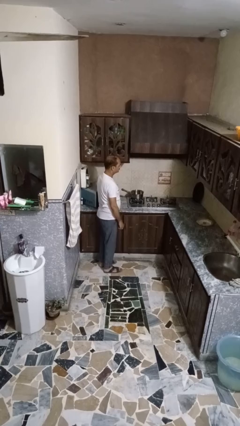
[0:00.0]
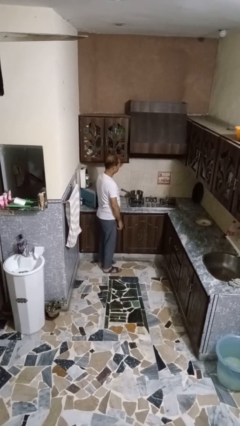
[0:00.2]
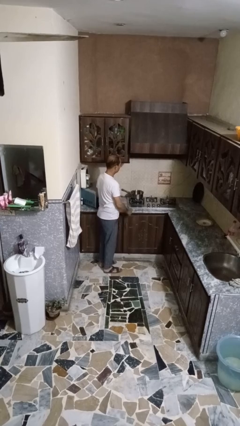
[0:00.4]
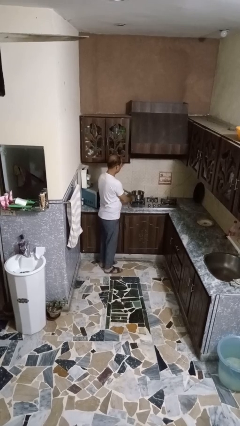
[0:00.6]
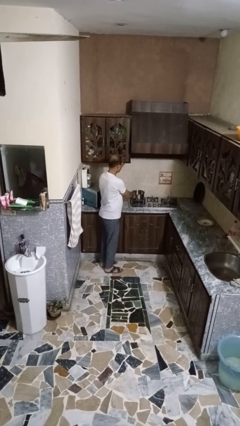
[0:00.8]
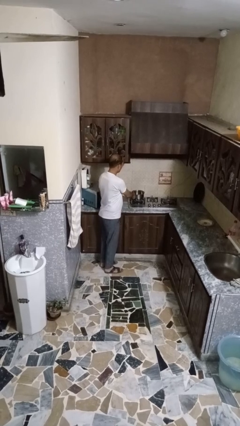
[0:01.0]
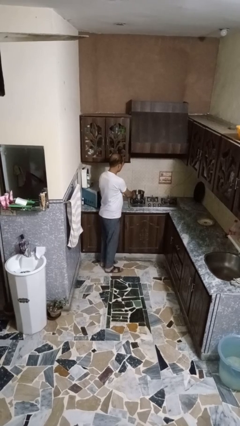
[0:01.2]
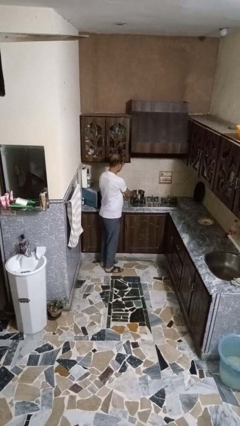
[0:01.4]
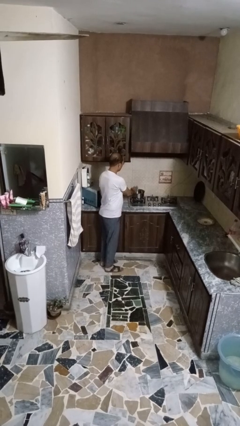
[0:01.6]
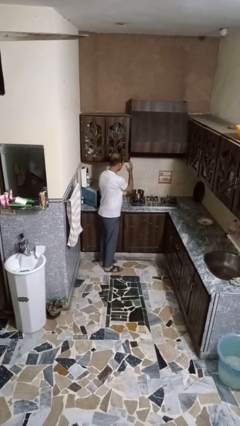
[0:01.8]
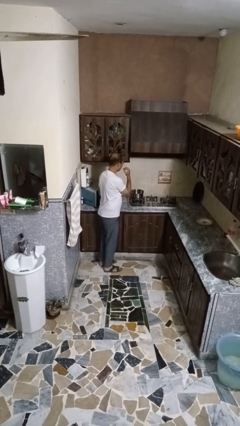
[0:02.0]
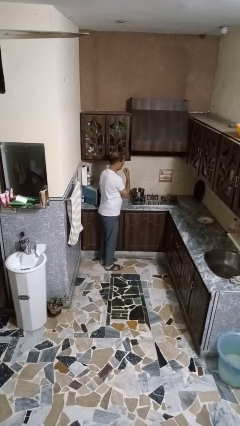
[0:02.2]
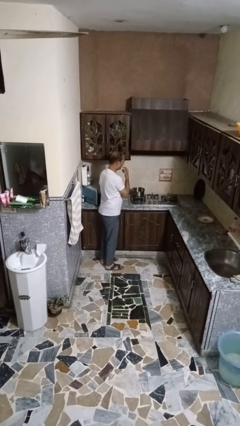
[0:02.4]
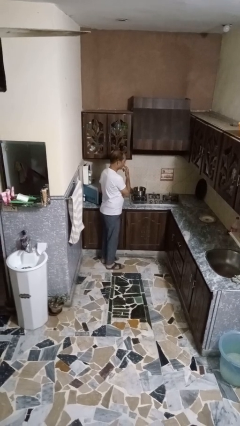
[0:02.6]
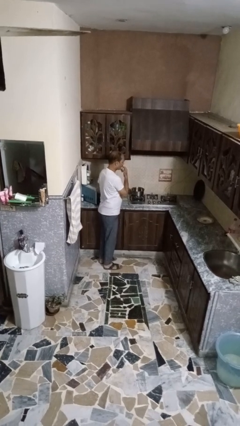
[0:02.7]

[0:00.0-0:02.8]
person burns hand

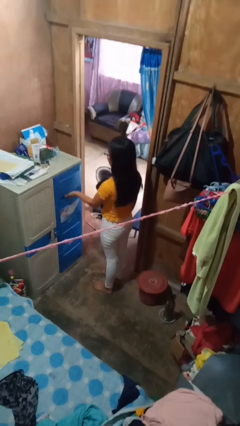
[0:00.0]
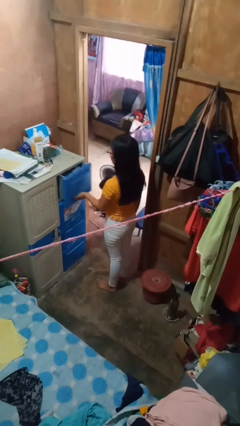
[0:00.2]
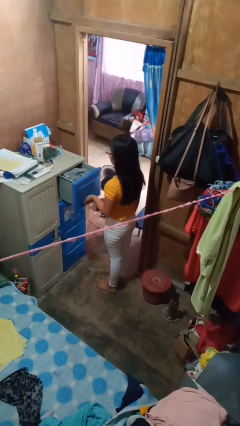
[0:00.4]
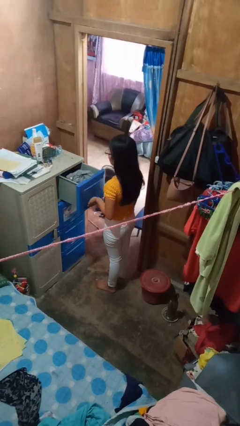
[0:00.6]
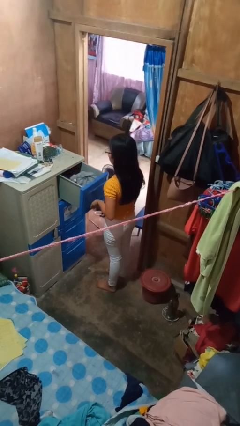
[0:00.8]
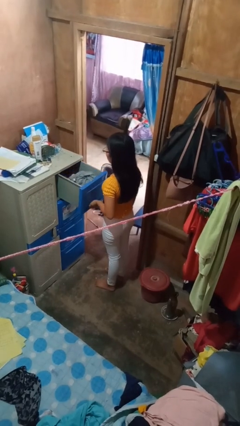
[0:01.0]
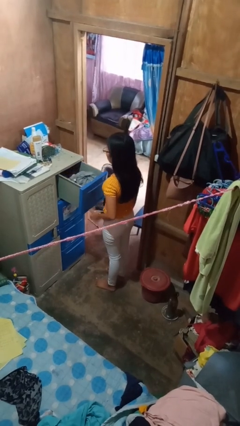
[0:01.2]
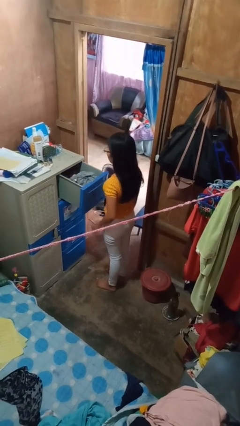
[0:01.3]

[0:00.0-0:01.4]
person opens dresser drawer

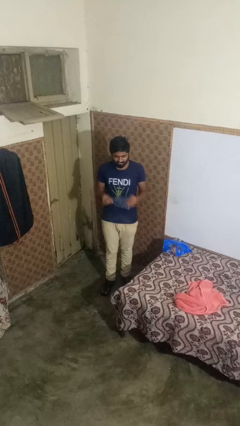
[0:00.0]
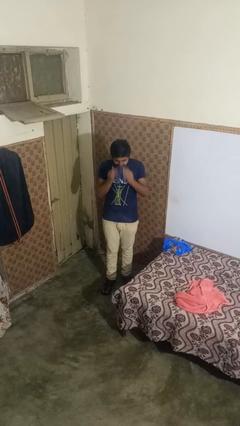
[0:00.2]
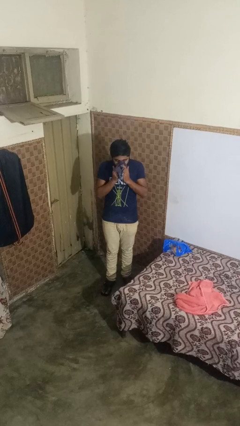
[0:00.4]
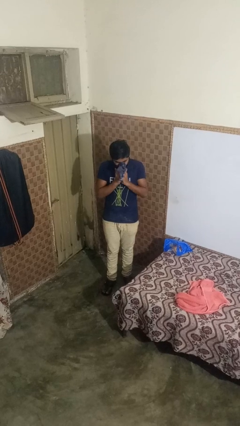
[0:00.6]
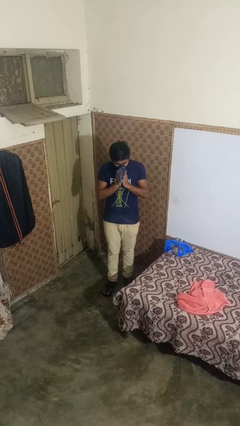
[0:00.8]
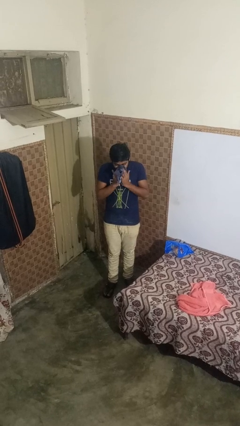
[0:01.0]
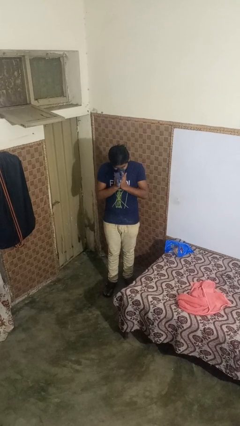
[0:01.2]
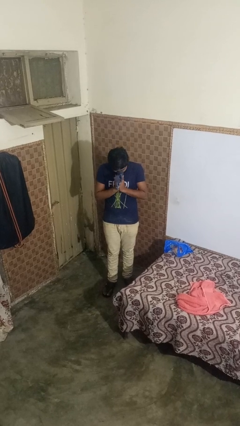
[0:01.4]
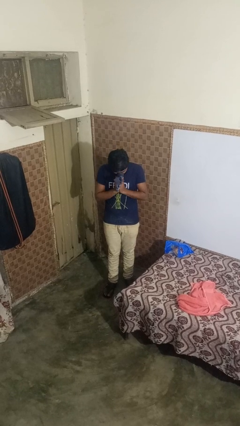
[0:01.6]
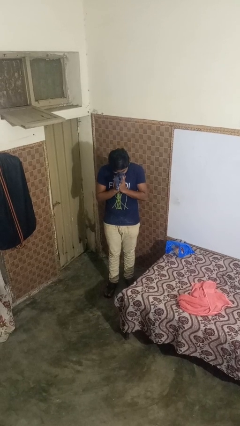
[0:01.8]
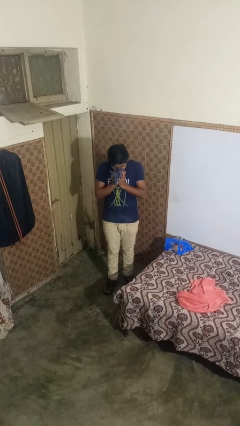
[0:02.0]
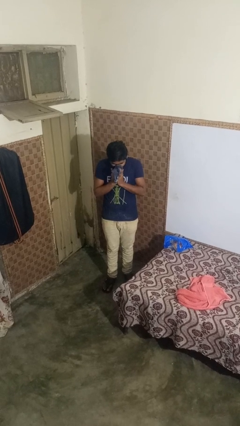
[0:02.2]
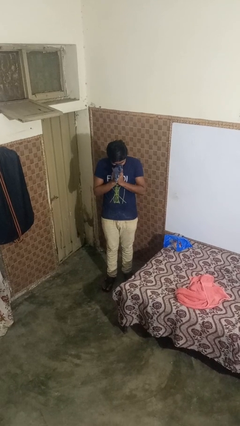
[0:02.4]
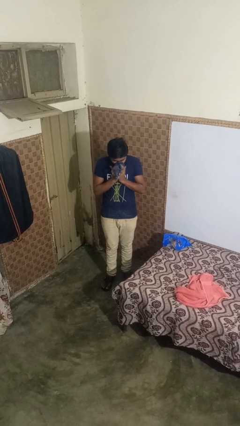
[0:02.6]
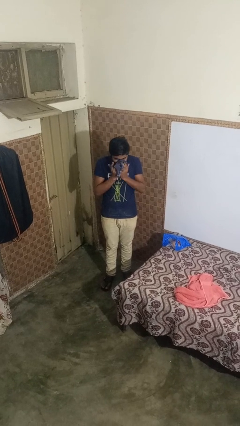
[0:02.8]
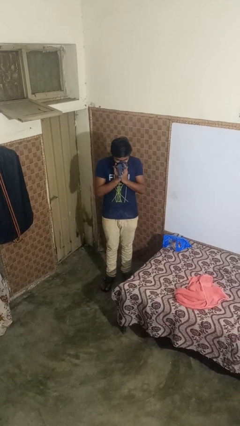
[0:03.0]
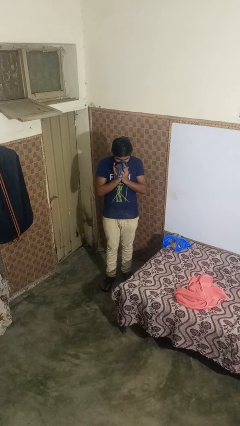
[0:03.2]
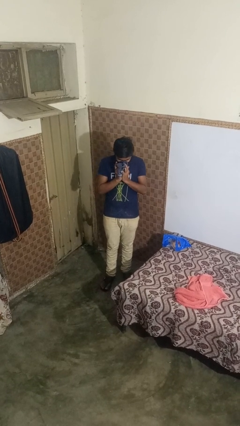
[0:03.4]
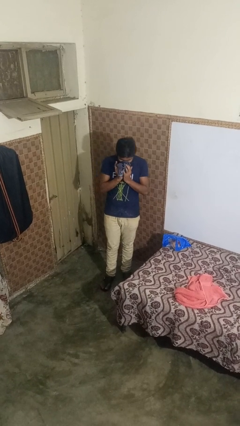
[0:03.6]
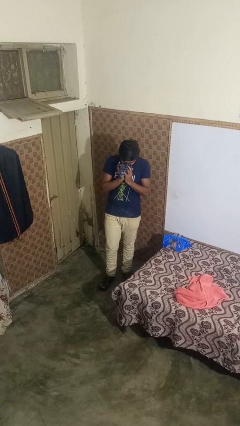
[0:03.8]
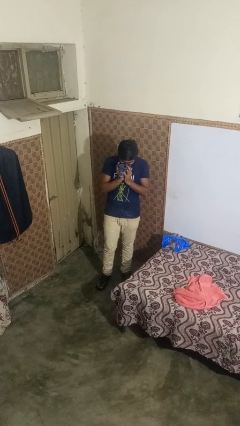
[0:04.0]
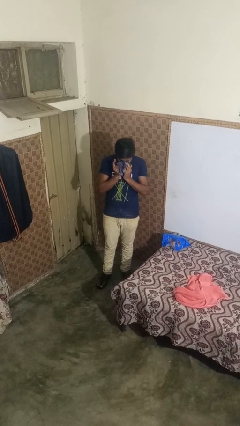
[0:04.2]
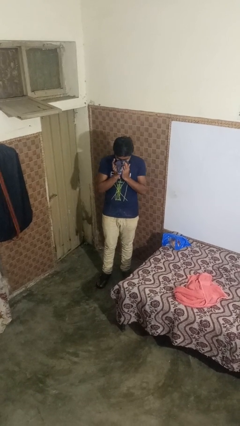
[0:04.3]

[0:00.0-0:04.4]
person blows nose

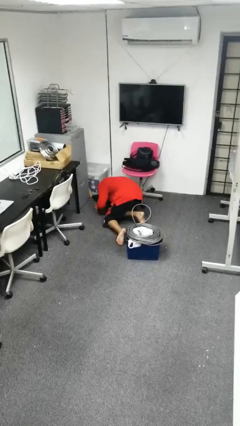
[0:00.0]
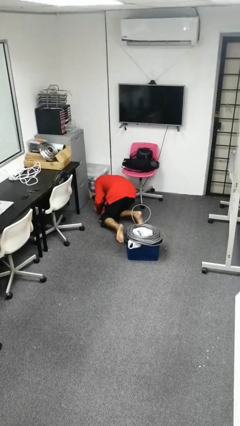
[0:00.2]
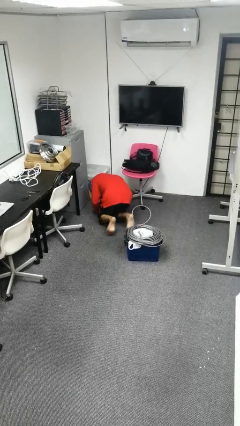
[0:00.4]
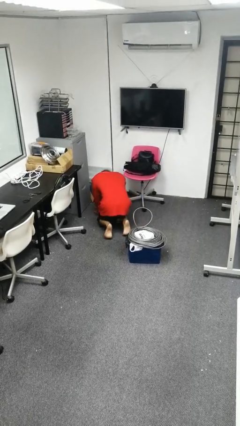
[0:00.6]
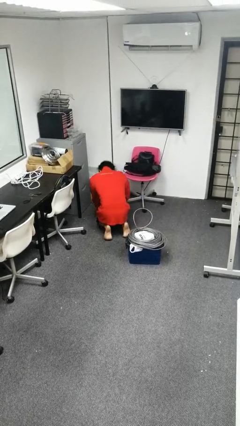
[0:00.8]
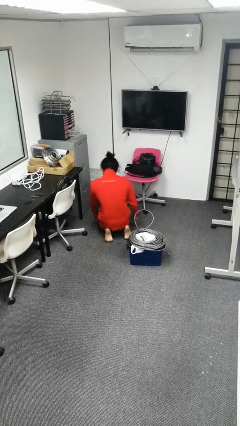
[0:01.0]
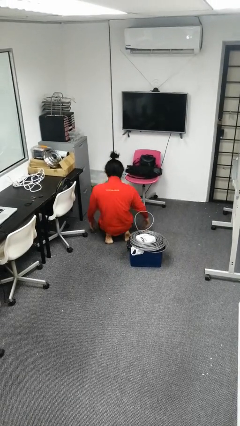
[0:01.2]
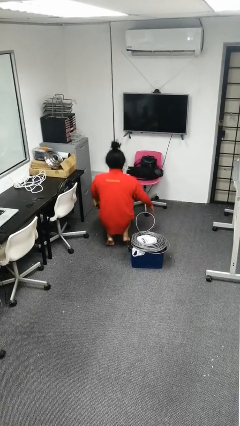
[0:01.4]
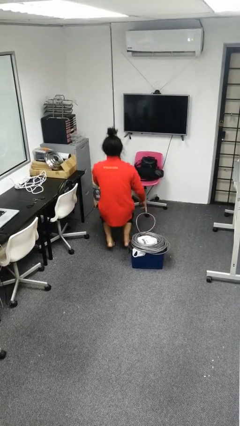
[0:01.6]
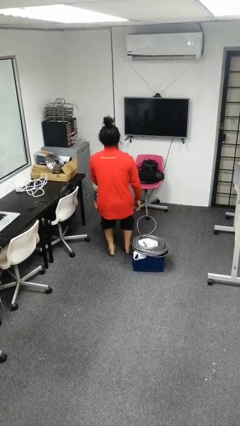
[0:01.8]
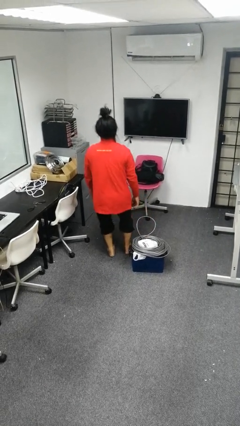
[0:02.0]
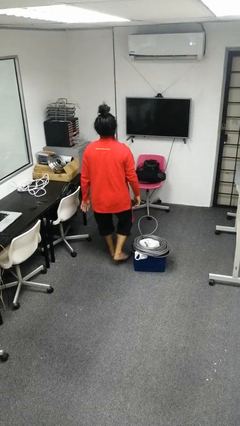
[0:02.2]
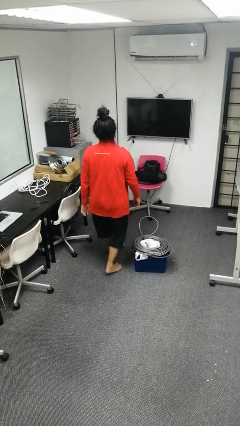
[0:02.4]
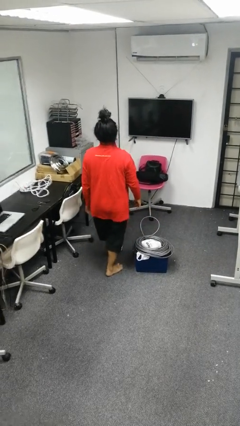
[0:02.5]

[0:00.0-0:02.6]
person stands up from floor

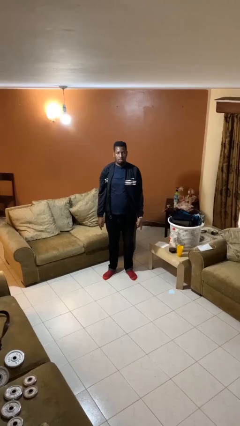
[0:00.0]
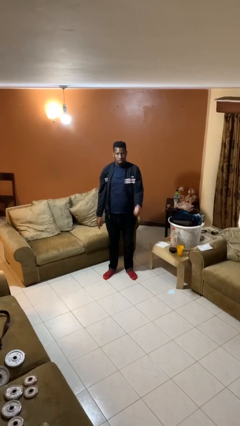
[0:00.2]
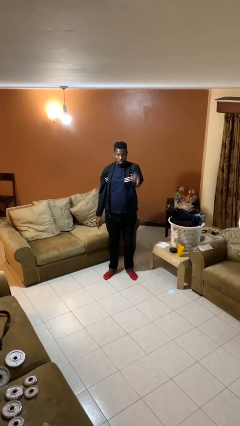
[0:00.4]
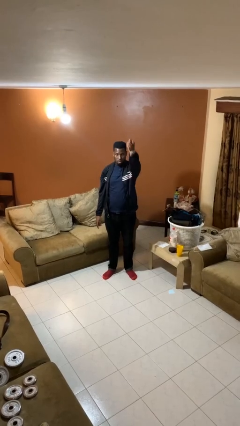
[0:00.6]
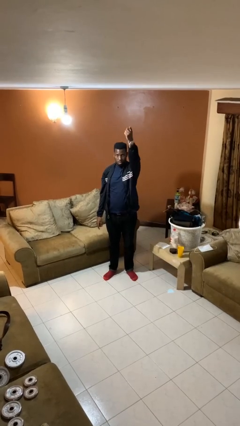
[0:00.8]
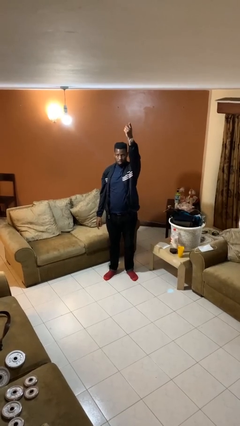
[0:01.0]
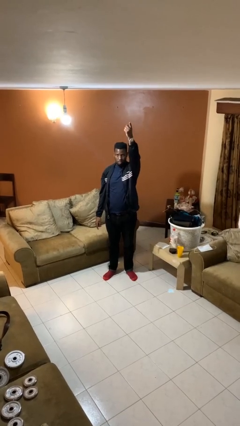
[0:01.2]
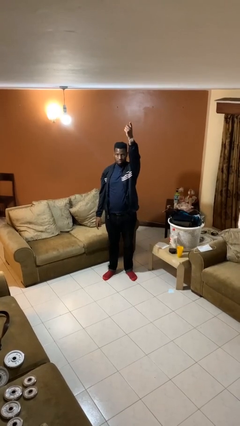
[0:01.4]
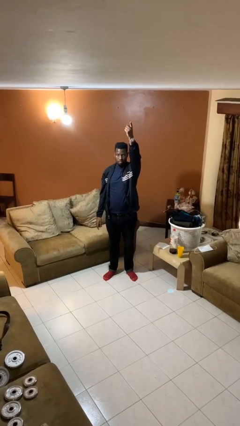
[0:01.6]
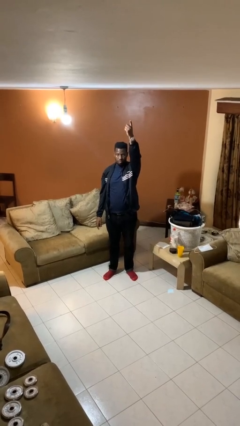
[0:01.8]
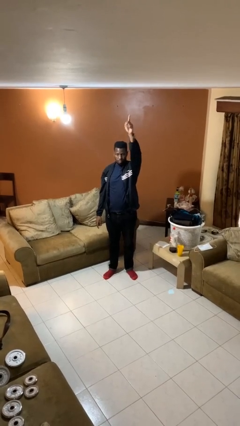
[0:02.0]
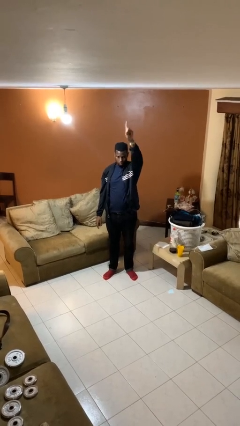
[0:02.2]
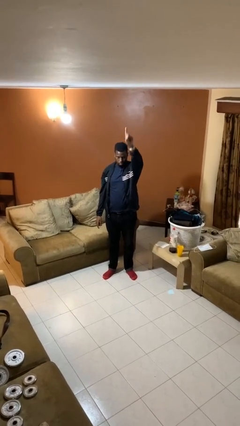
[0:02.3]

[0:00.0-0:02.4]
person gestures swipe up

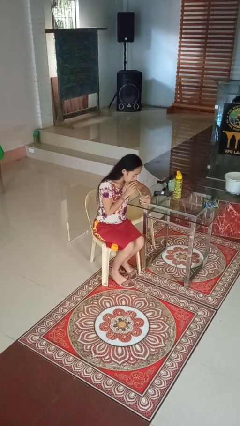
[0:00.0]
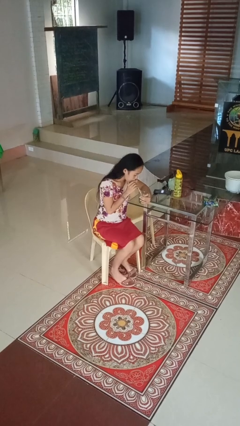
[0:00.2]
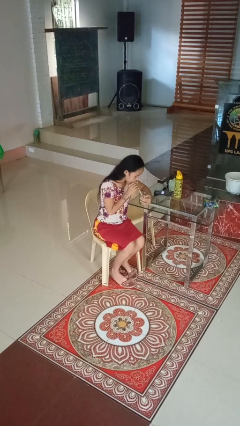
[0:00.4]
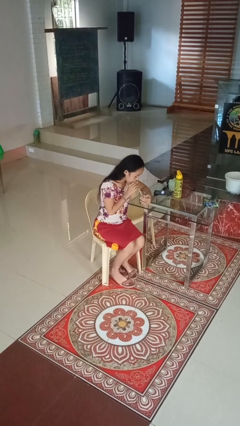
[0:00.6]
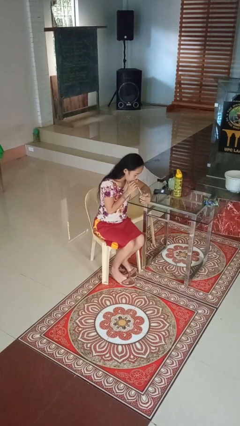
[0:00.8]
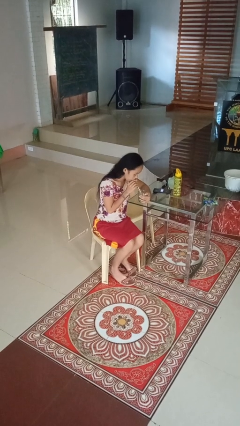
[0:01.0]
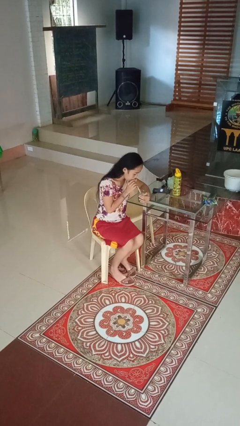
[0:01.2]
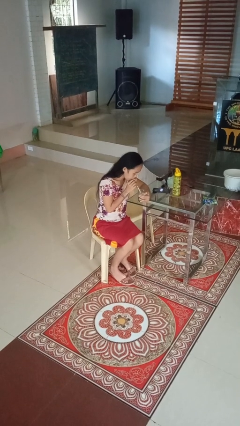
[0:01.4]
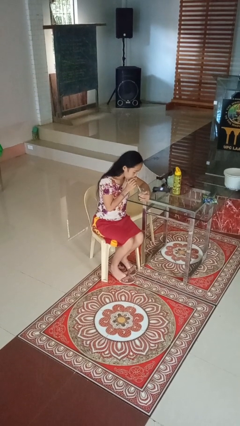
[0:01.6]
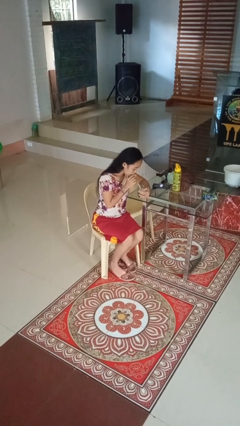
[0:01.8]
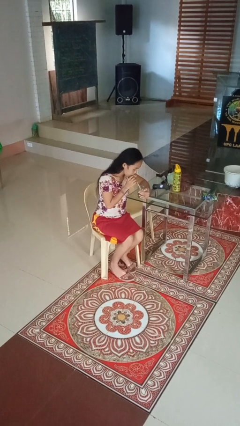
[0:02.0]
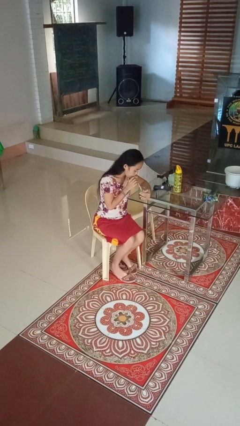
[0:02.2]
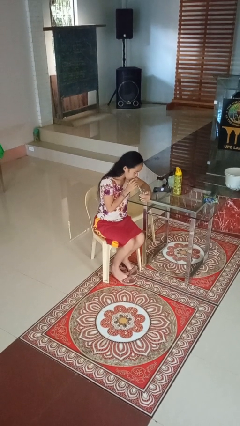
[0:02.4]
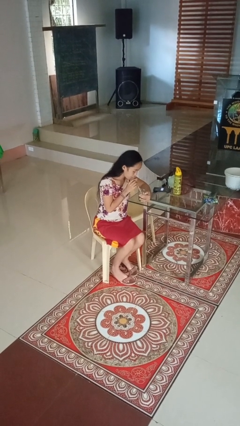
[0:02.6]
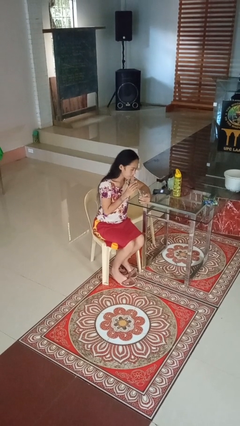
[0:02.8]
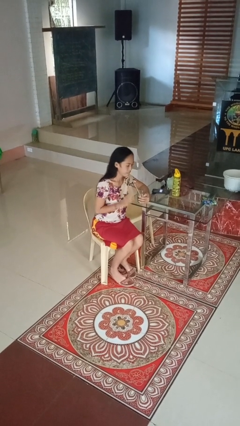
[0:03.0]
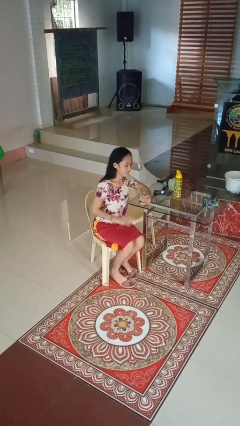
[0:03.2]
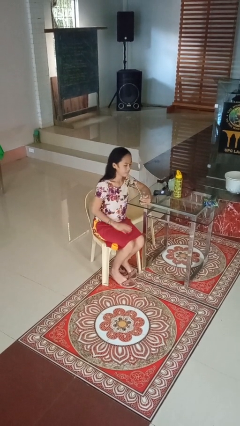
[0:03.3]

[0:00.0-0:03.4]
person drinks from straw

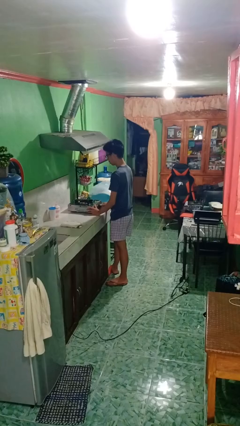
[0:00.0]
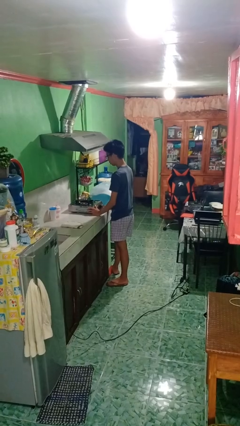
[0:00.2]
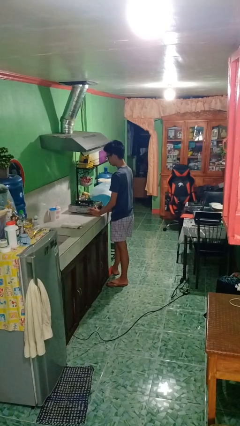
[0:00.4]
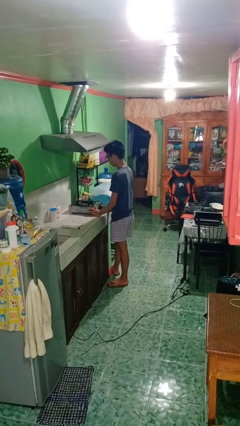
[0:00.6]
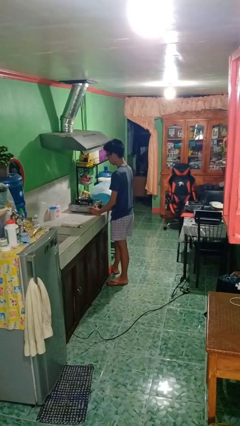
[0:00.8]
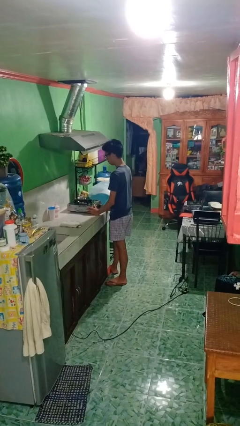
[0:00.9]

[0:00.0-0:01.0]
person turns off stovetop
